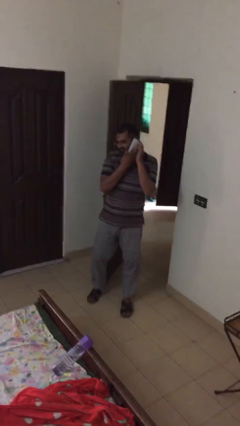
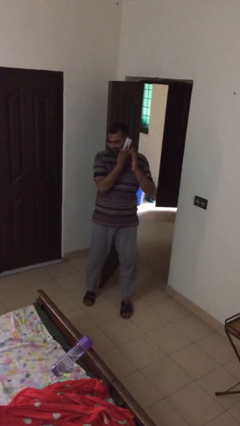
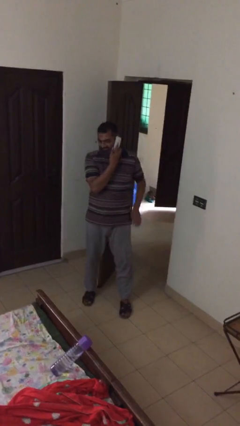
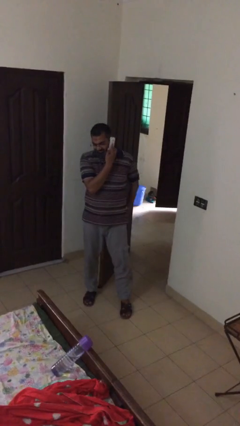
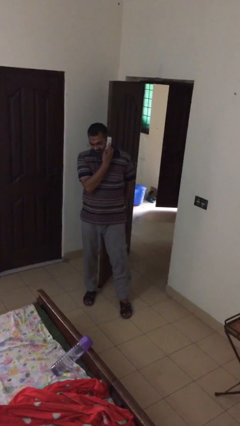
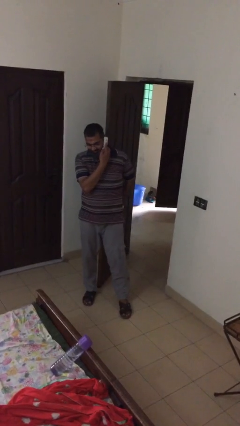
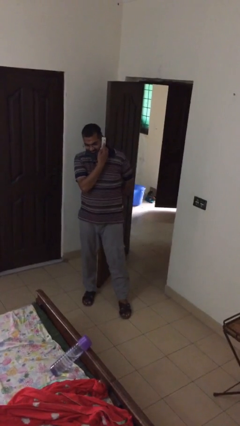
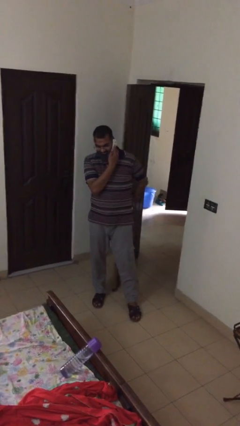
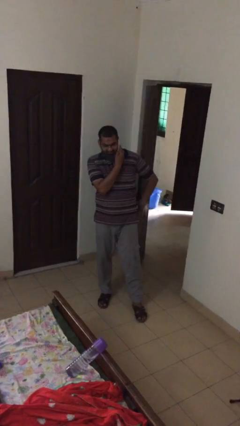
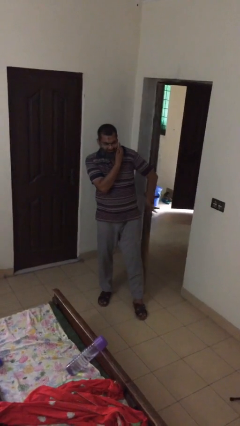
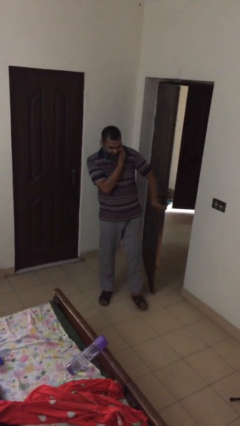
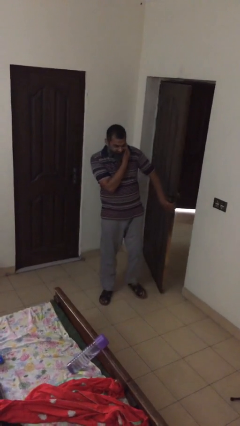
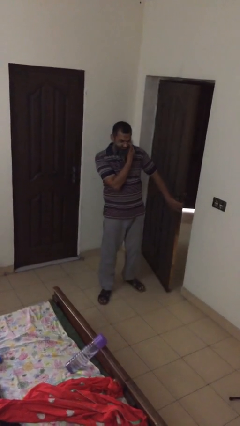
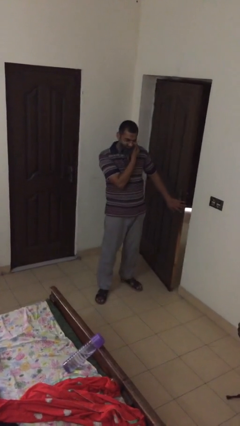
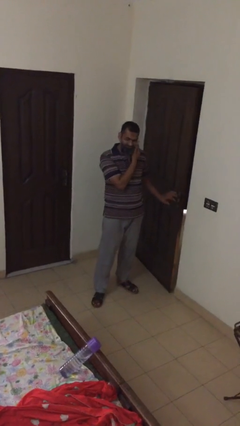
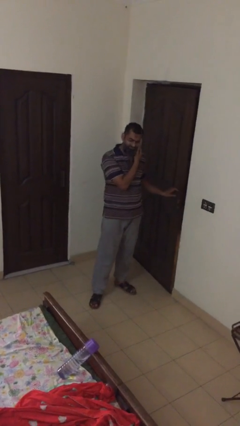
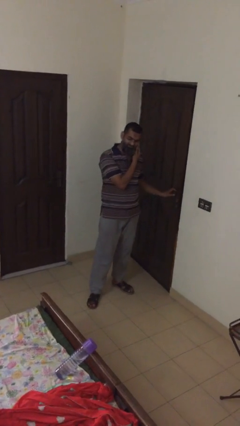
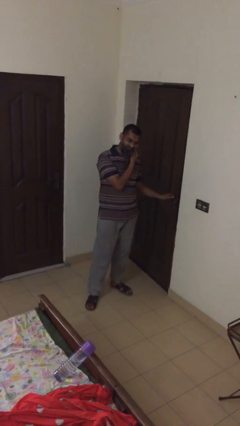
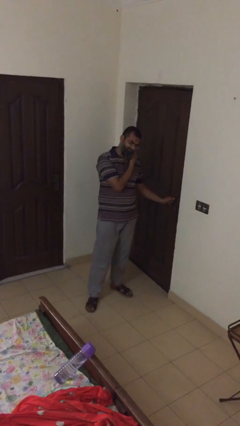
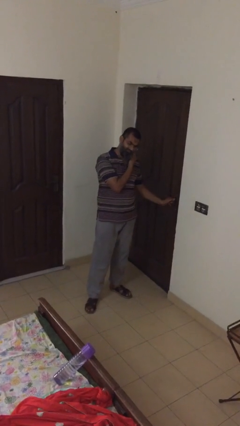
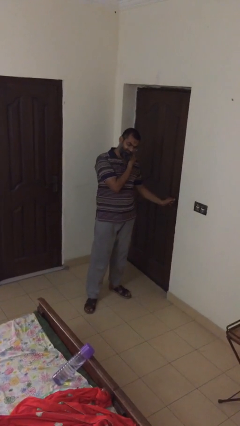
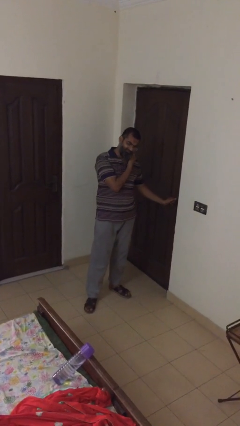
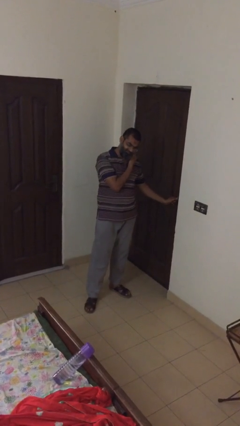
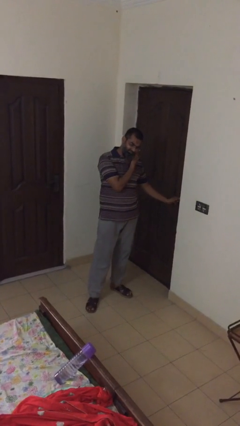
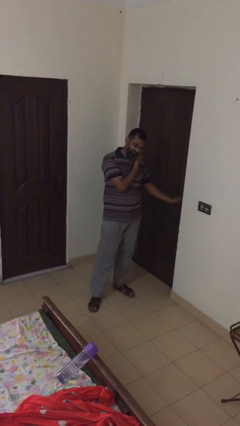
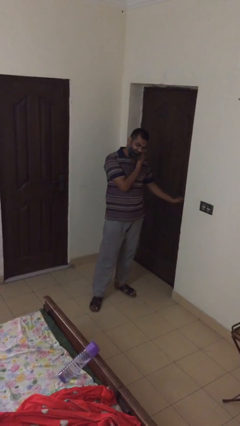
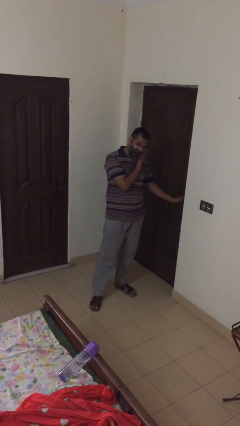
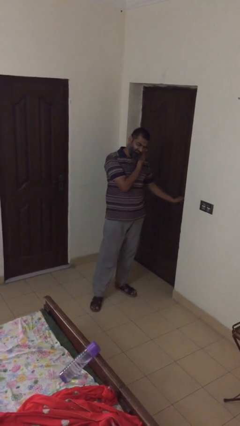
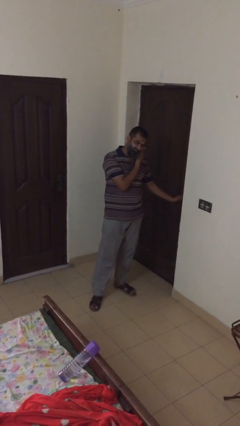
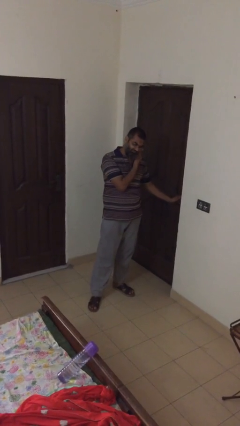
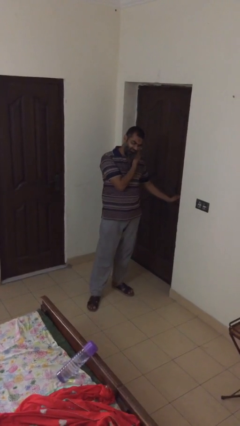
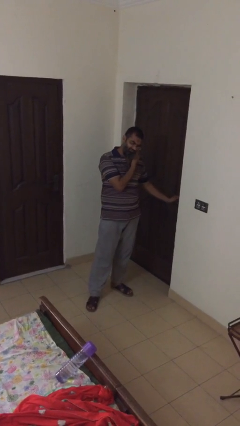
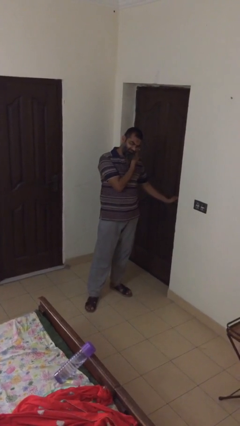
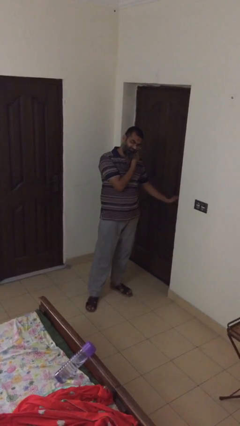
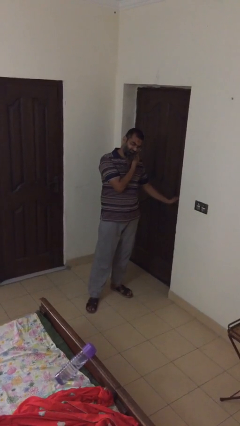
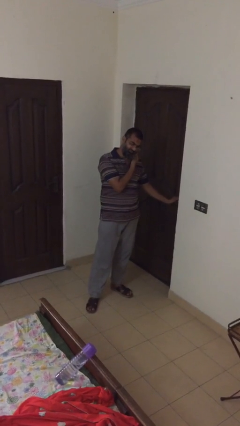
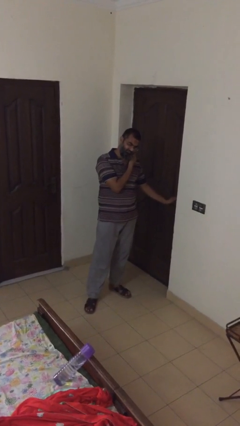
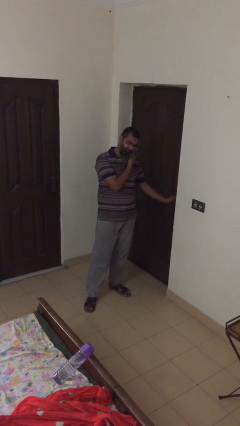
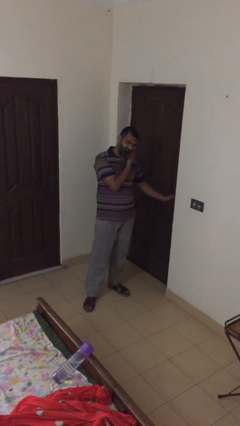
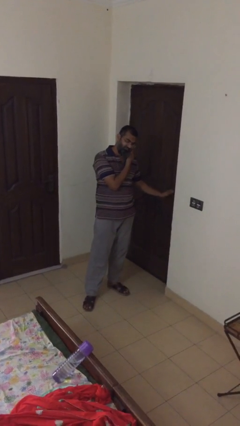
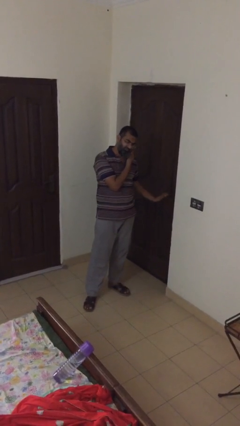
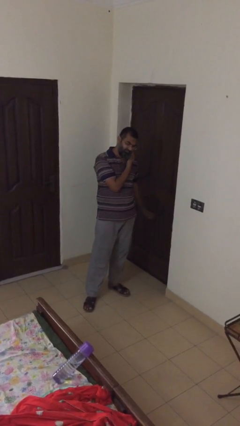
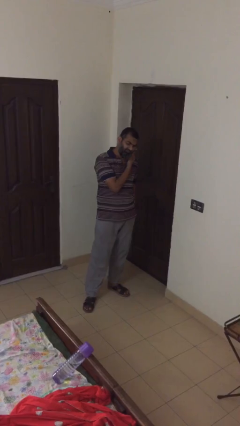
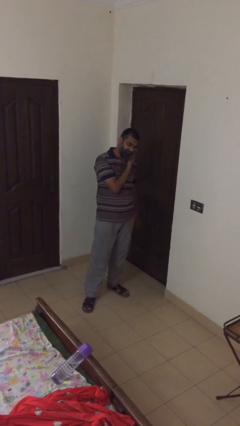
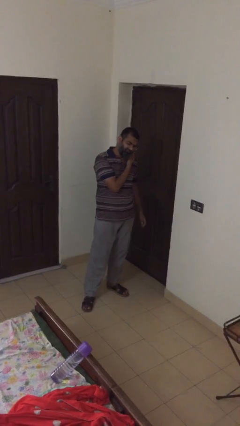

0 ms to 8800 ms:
person closes facility door

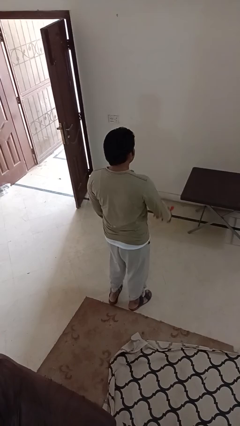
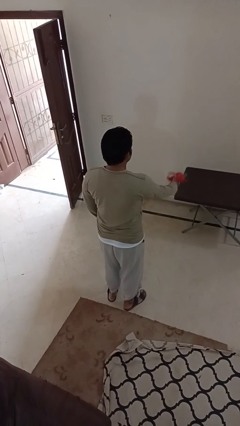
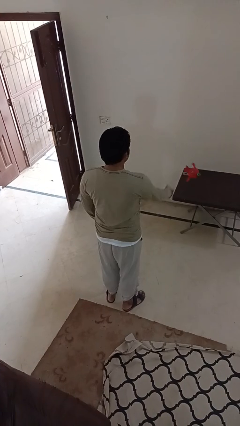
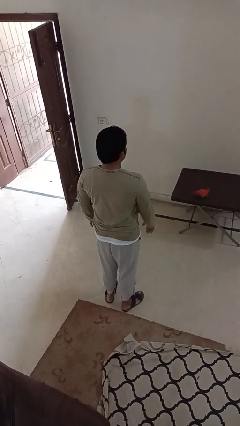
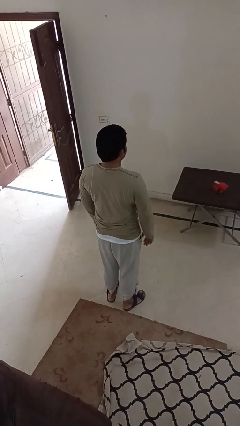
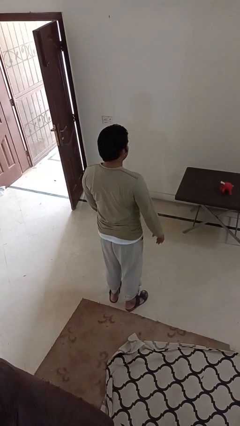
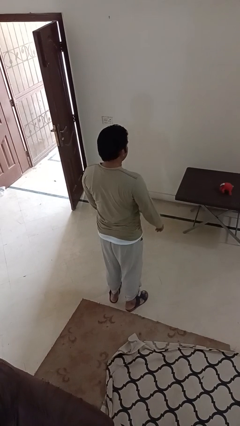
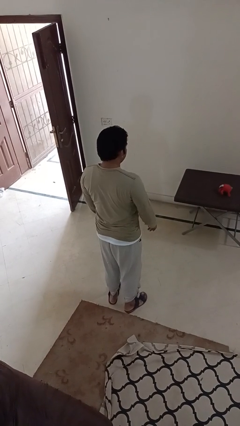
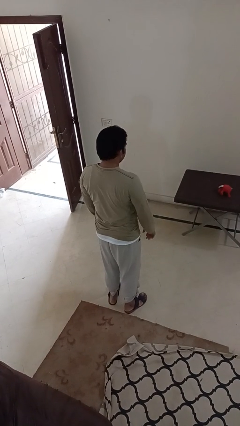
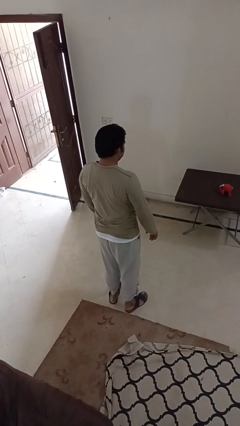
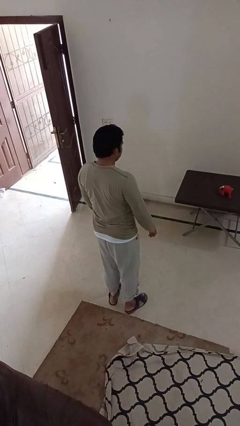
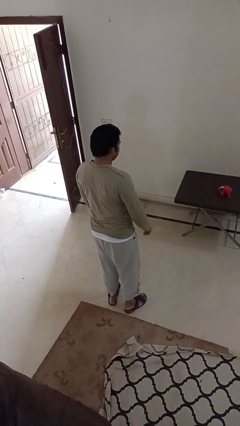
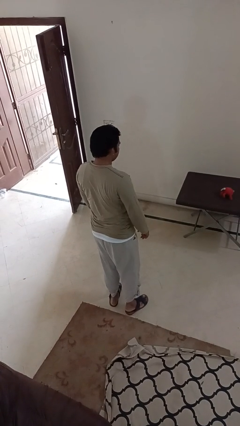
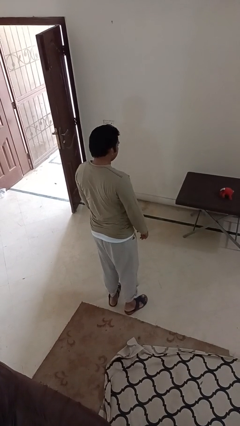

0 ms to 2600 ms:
person throws object on table

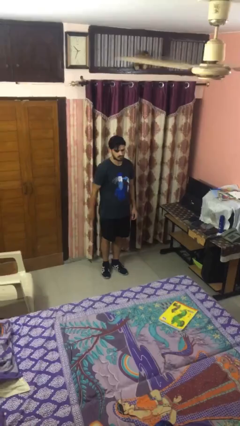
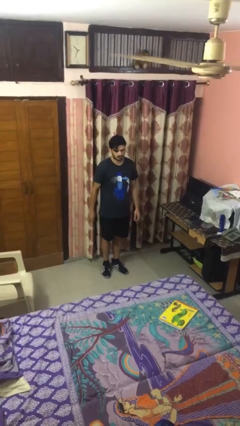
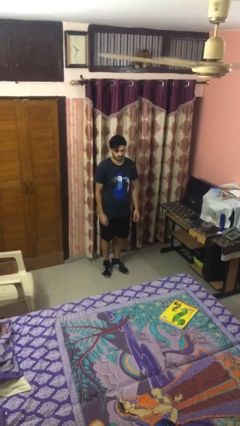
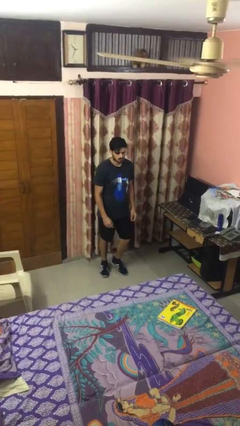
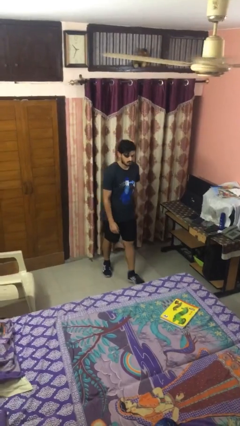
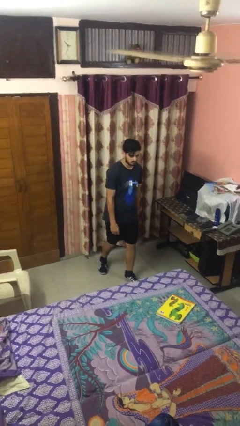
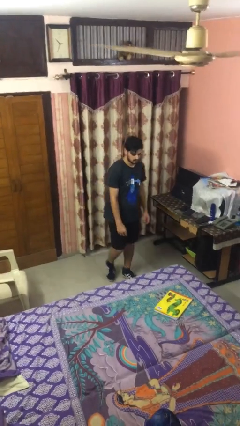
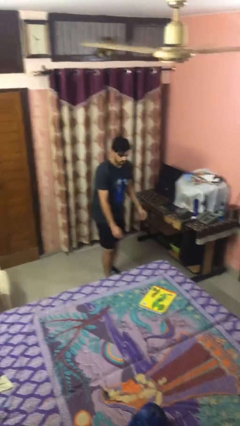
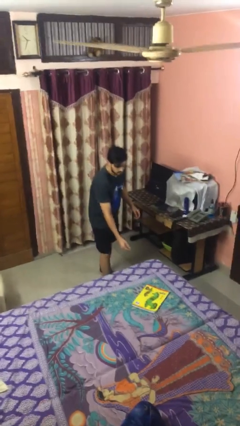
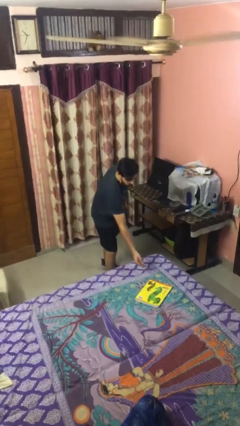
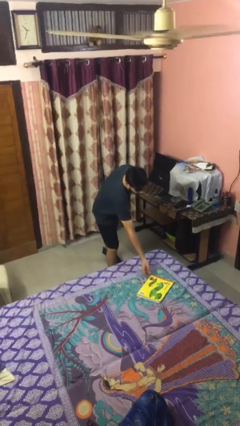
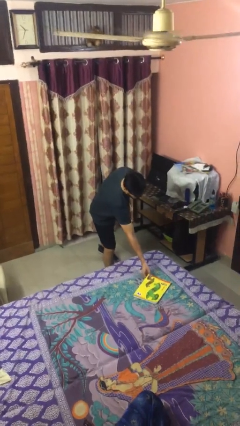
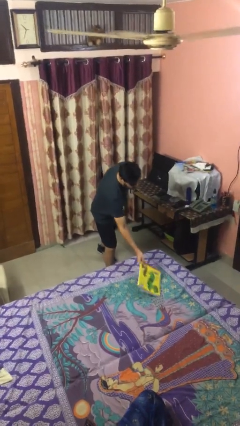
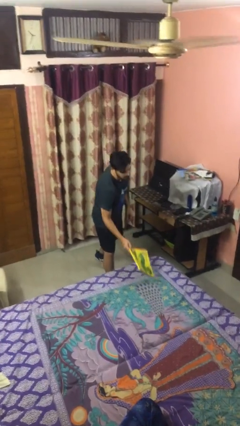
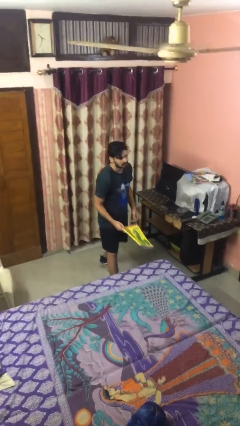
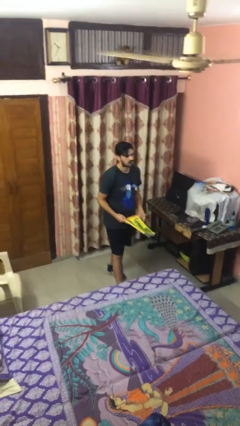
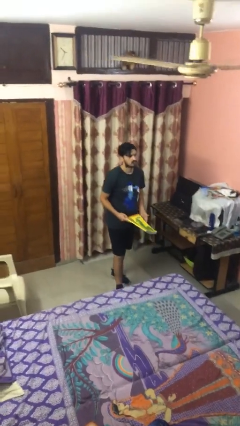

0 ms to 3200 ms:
person picks up object from bed

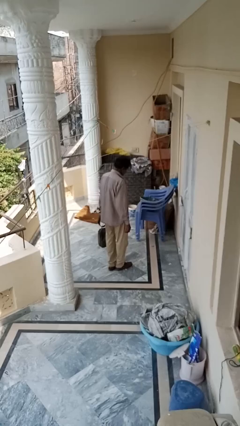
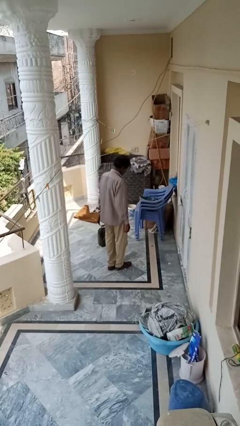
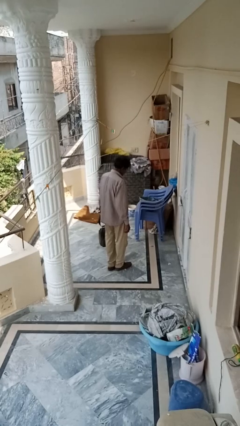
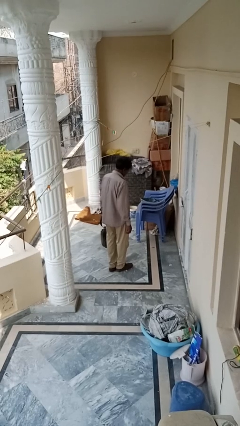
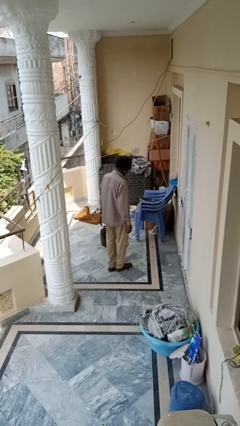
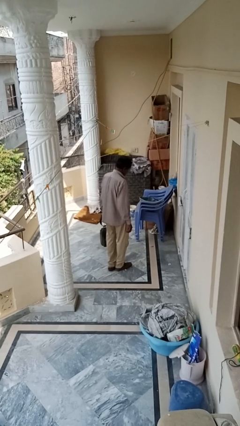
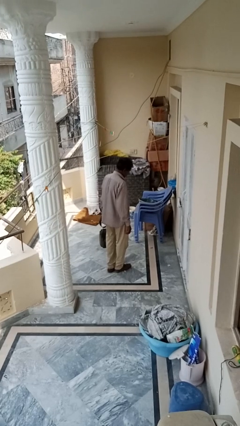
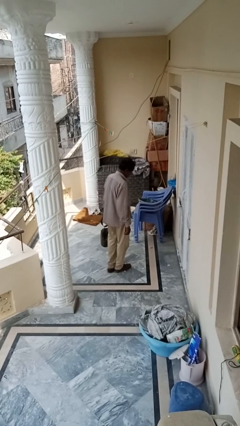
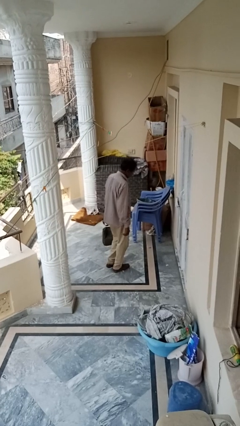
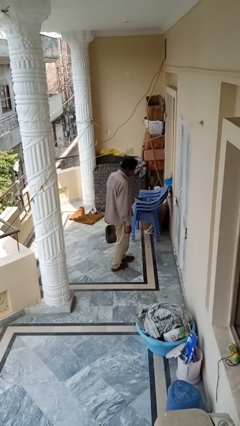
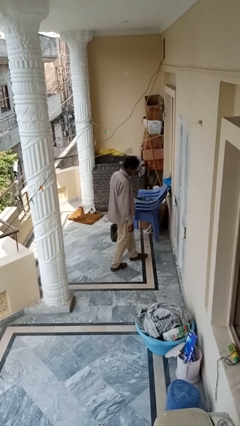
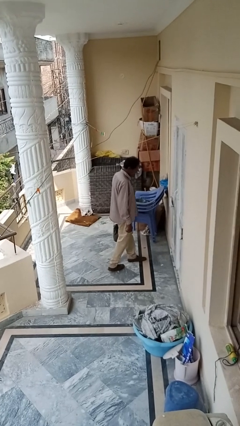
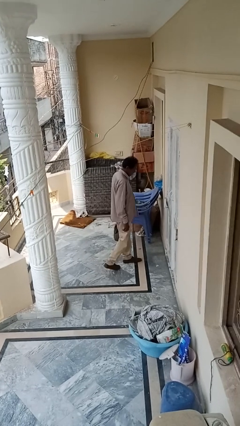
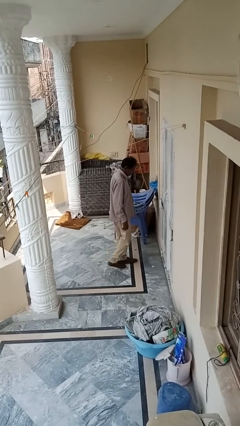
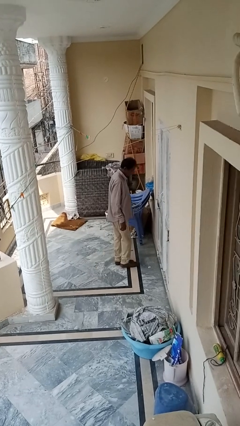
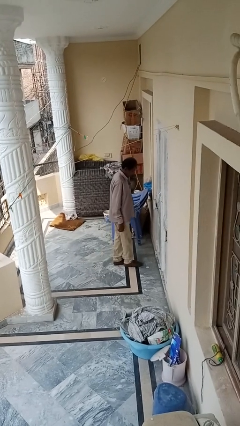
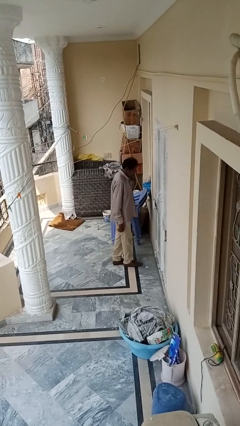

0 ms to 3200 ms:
person carries groceries
